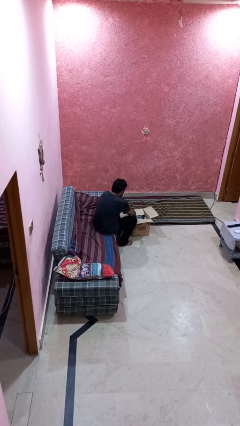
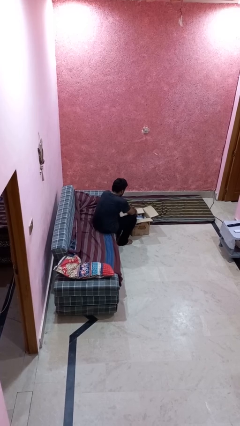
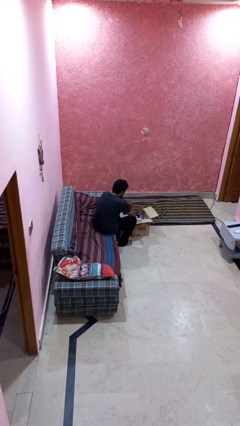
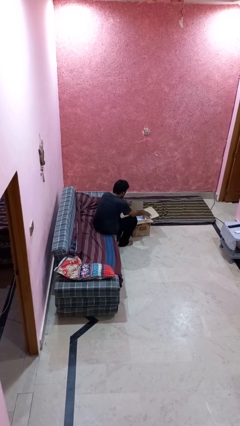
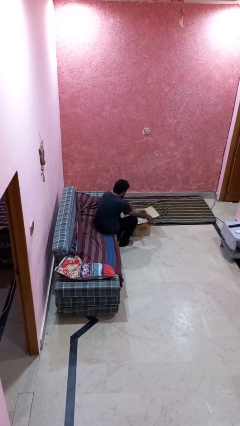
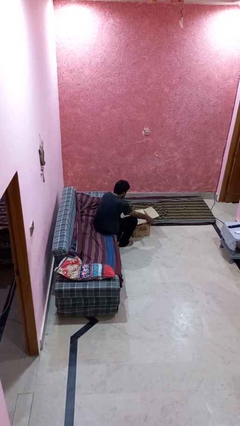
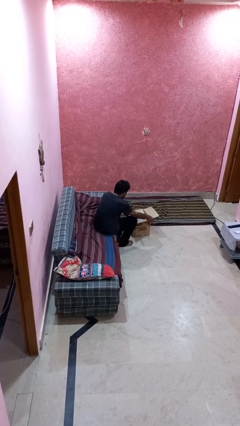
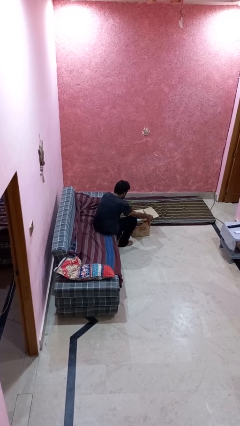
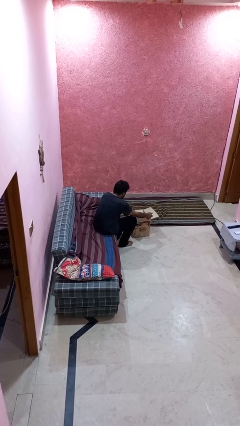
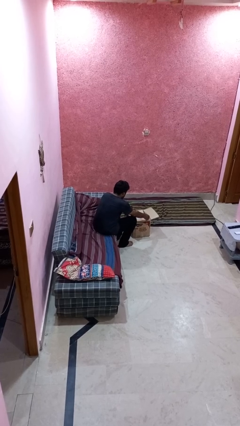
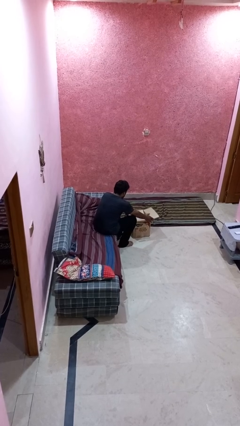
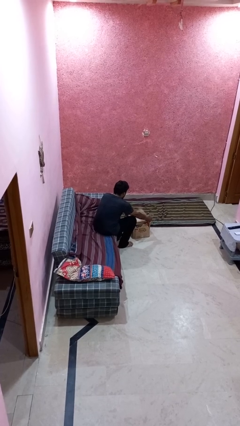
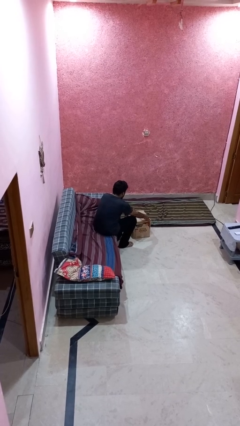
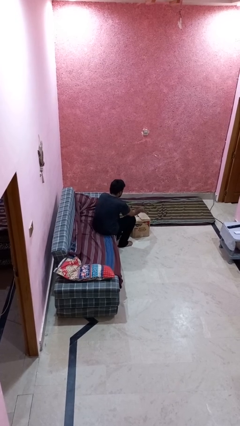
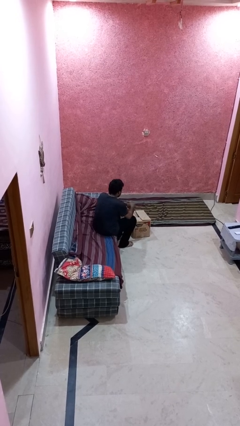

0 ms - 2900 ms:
person closes box

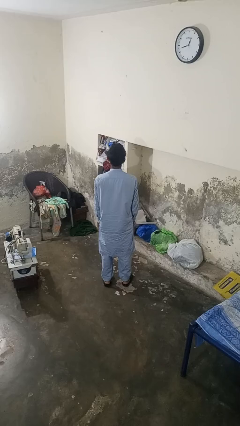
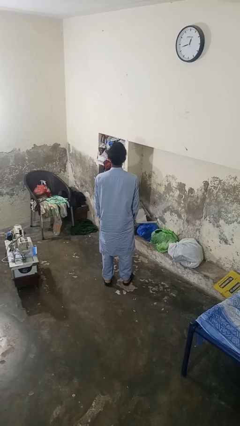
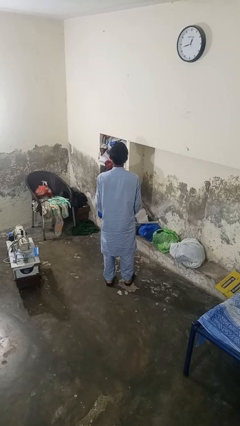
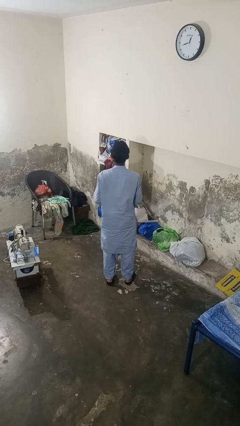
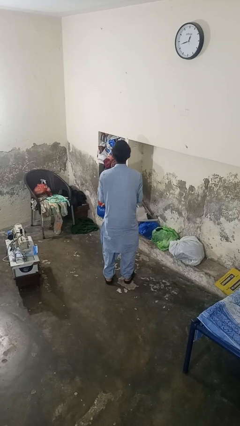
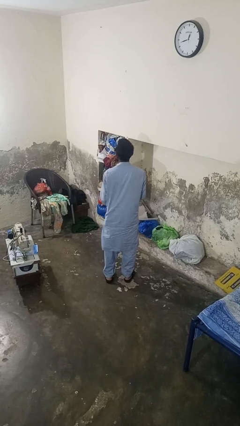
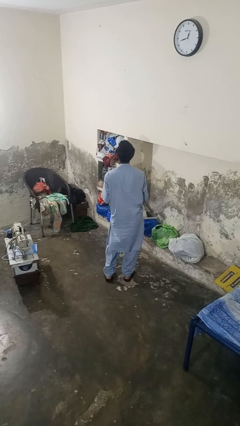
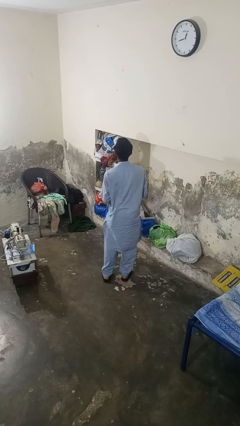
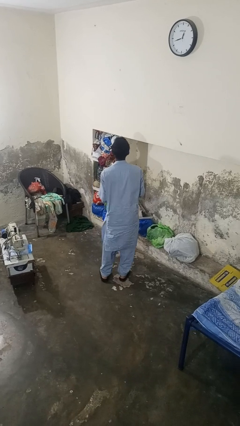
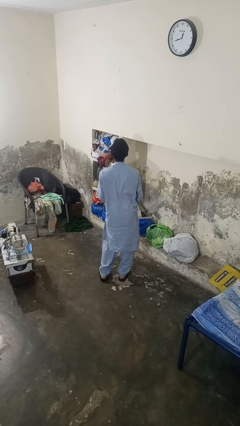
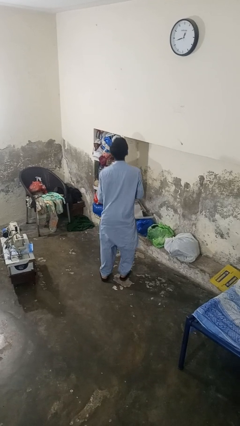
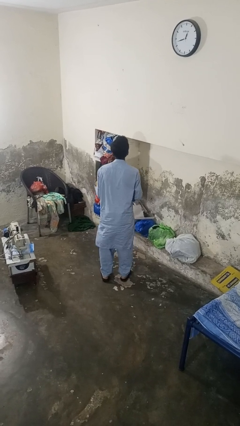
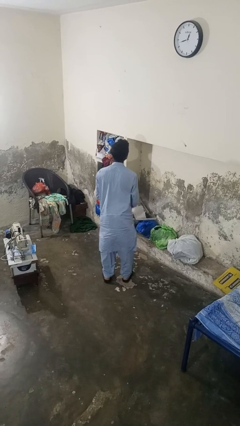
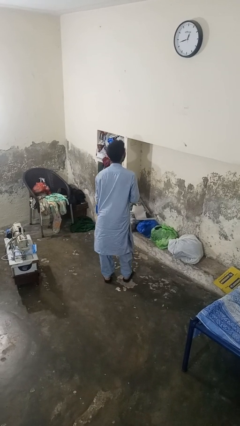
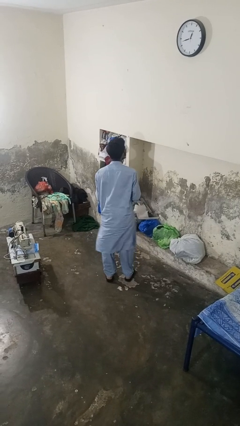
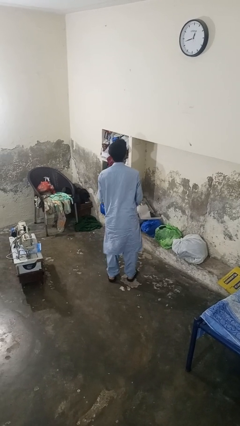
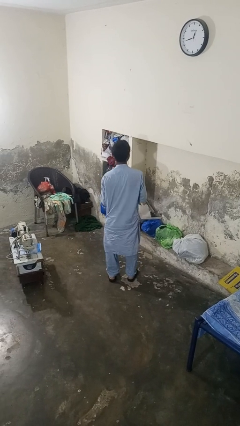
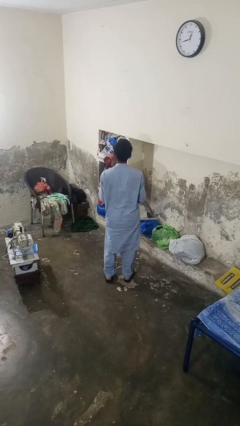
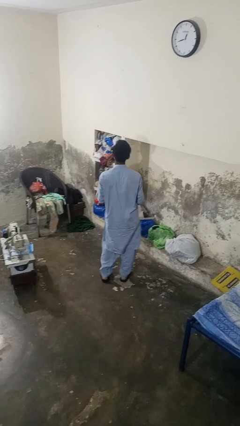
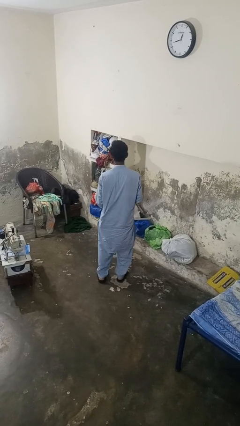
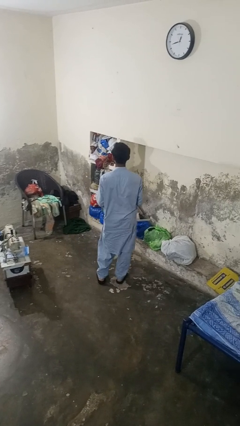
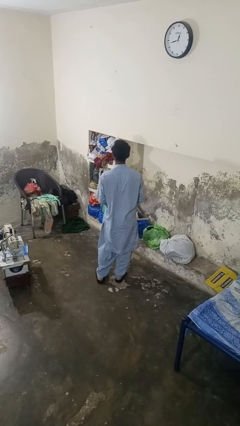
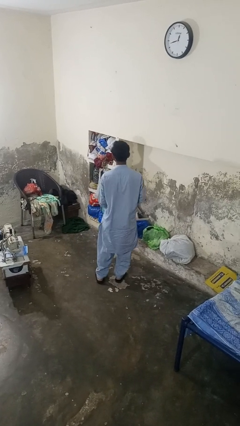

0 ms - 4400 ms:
person wiggles hips

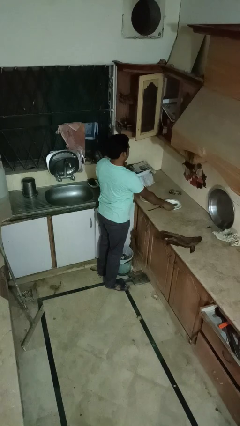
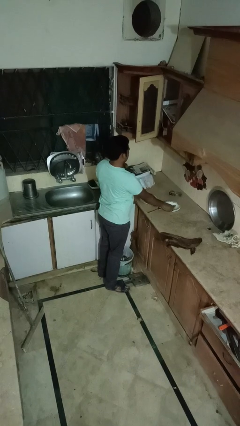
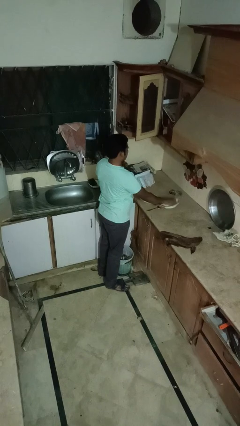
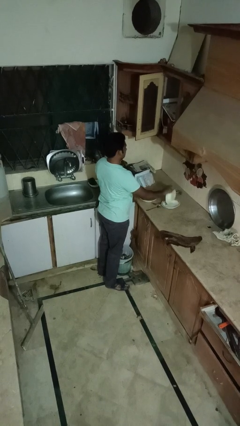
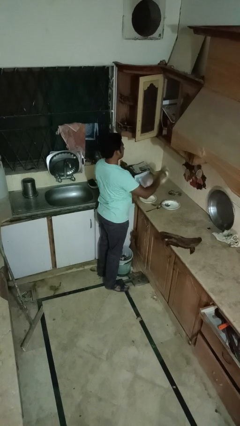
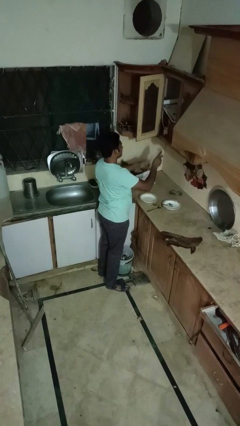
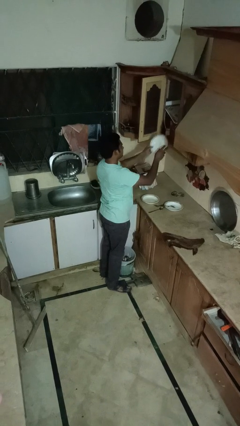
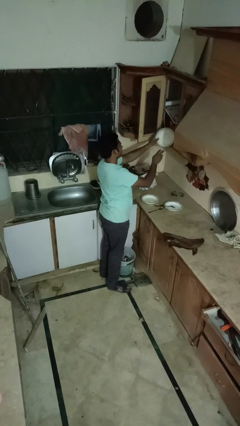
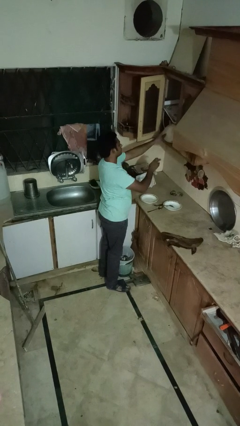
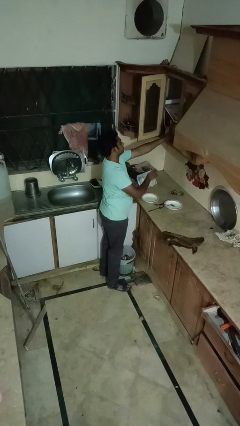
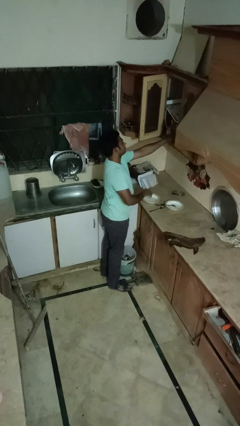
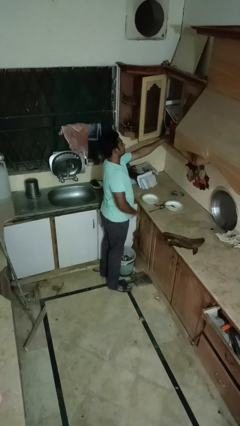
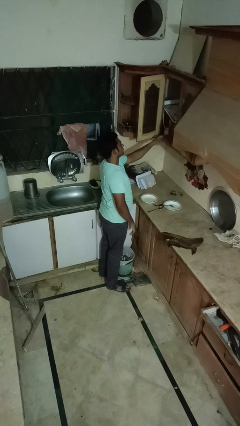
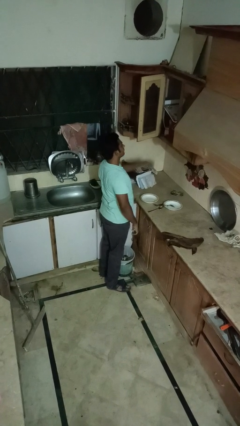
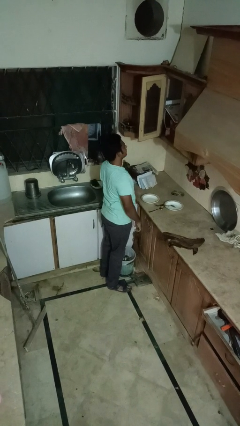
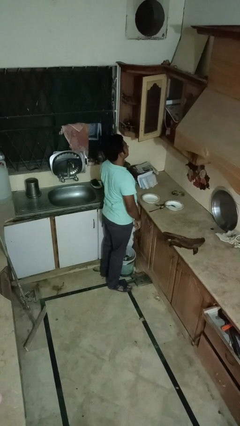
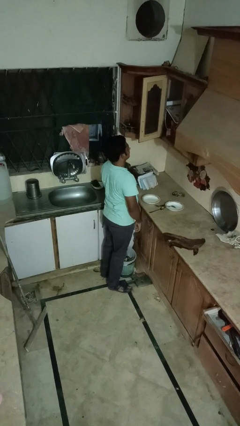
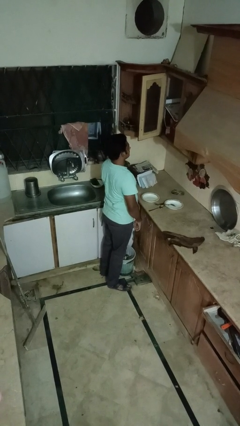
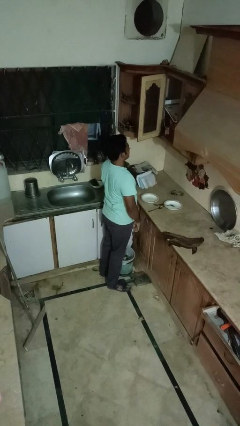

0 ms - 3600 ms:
person puts object in cabinet

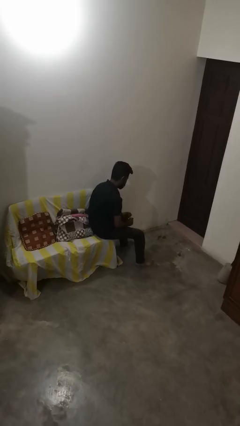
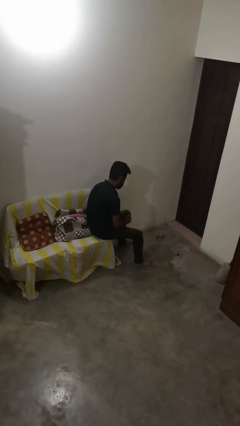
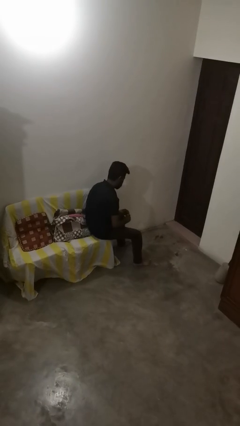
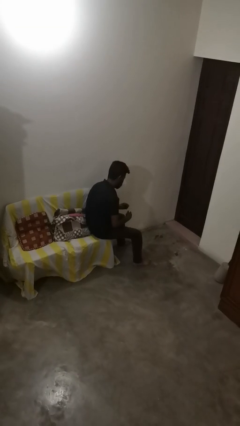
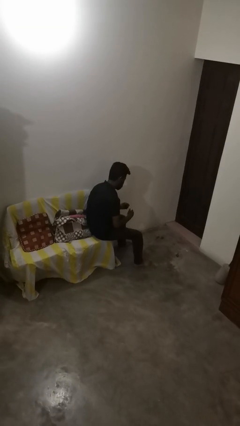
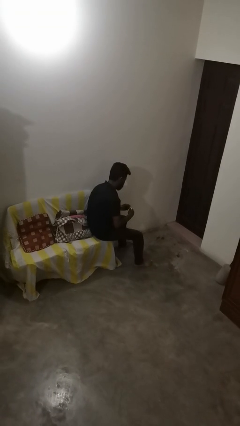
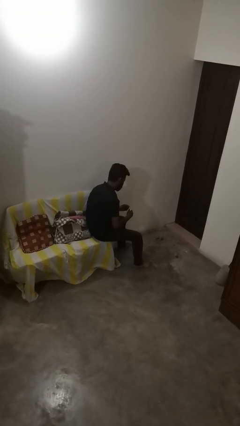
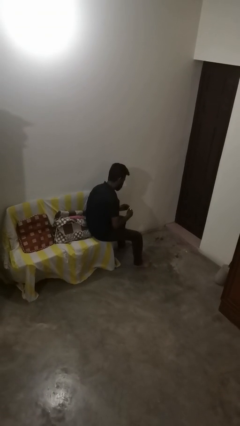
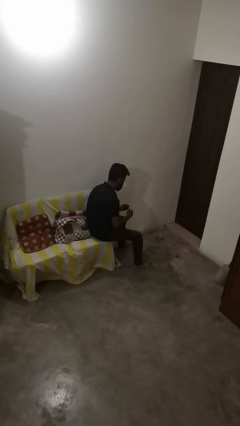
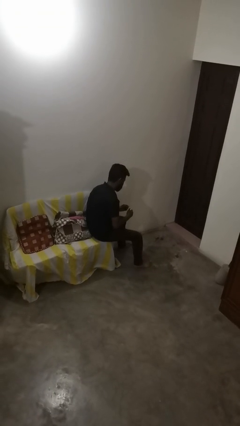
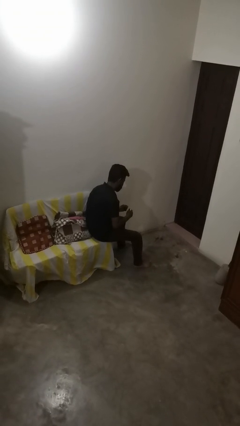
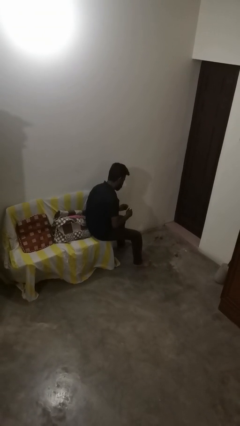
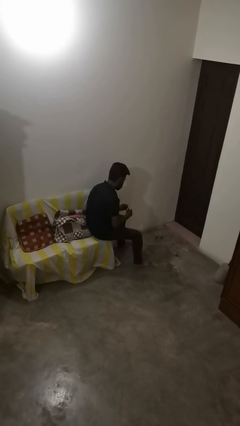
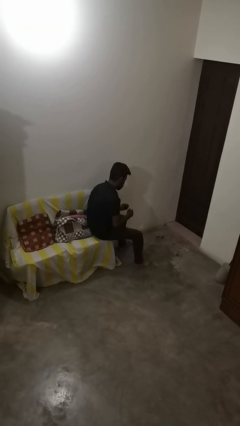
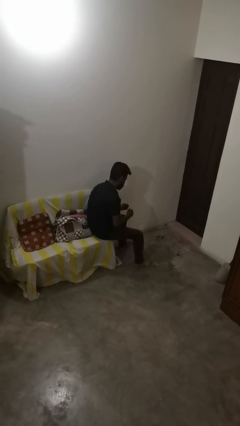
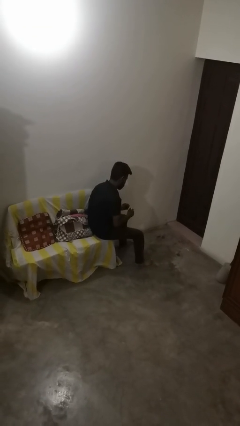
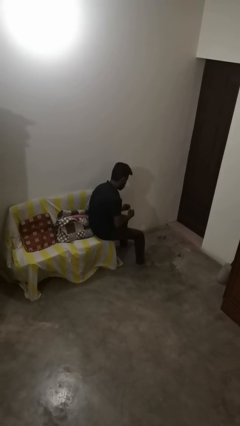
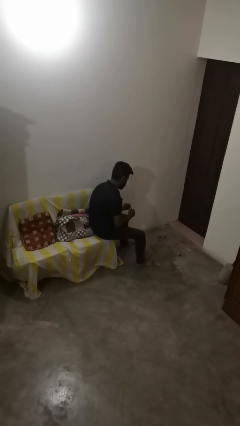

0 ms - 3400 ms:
person paints fingernails

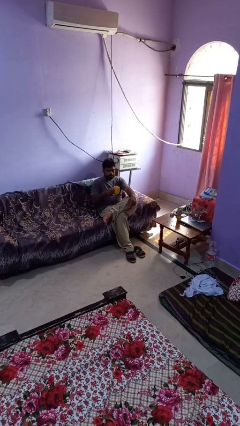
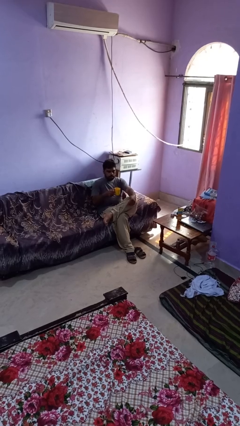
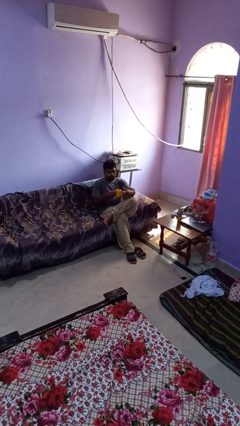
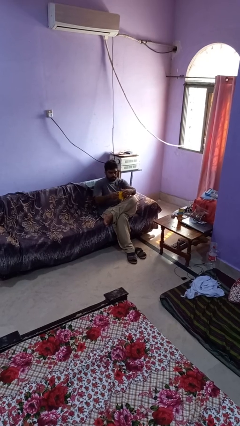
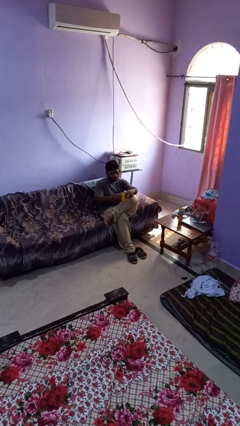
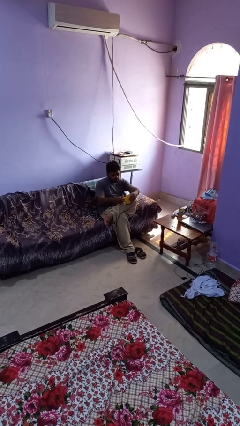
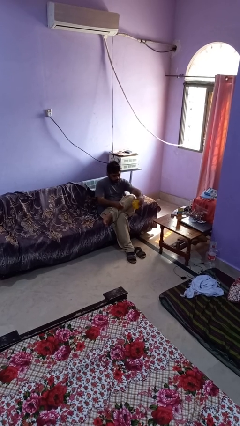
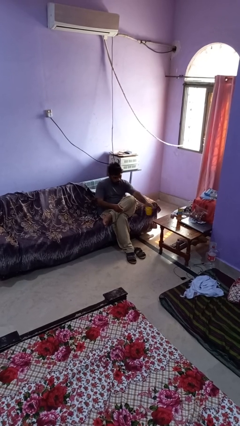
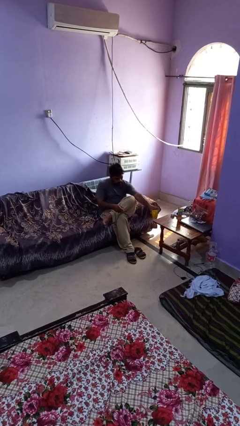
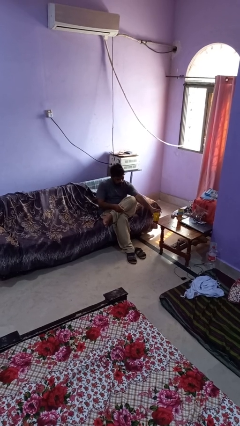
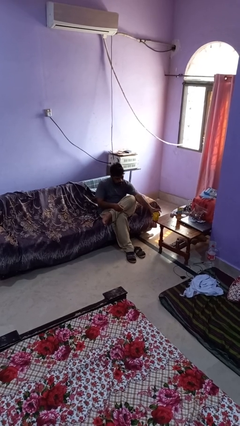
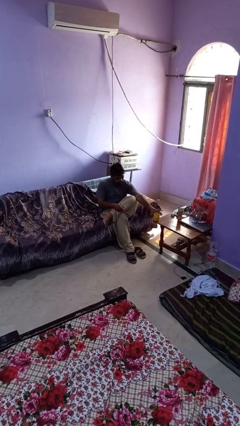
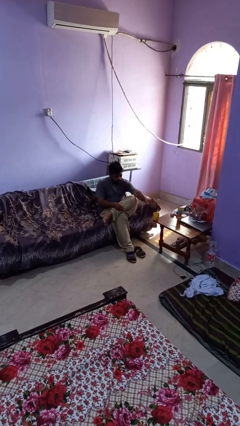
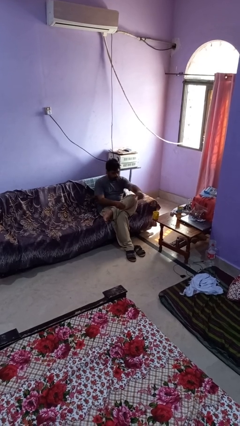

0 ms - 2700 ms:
person puts down object on table

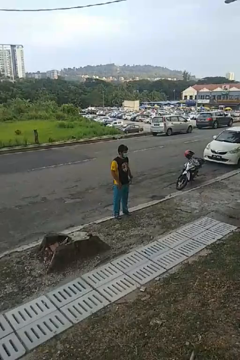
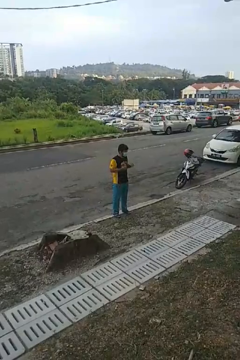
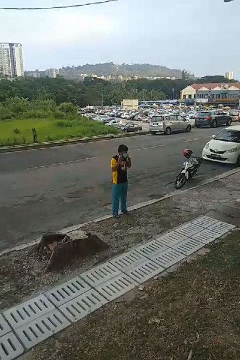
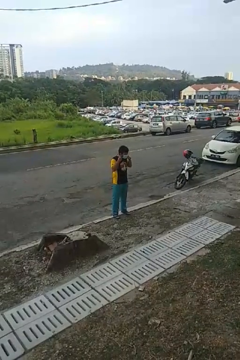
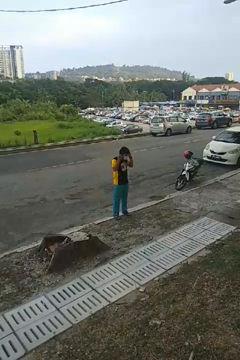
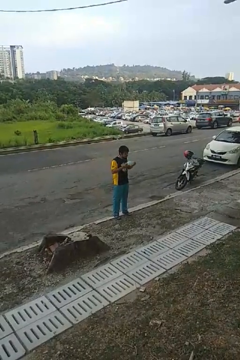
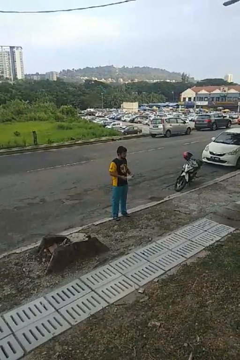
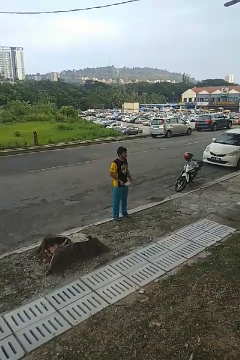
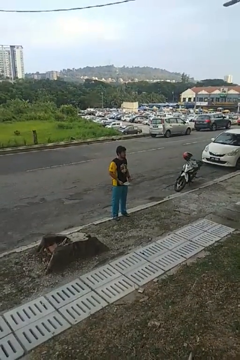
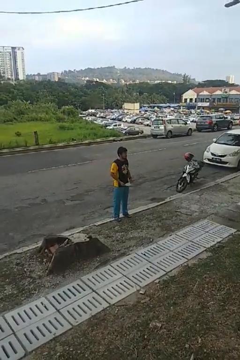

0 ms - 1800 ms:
person takes off facemask
